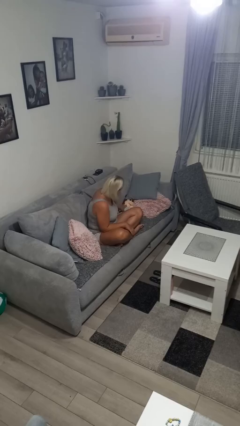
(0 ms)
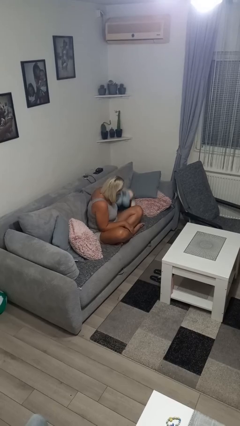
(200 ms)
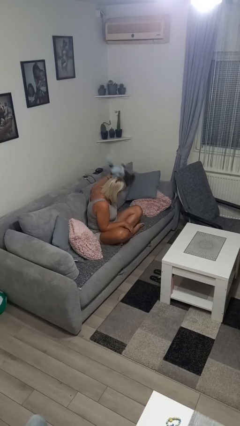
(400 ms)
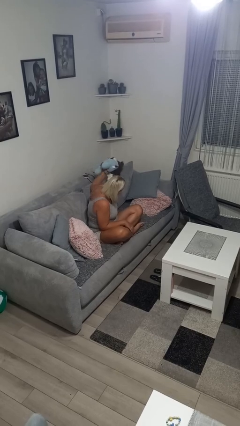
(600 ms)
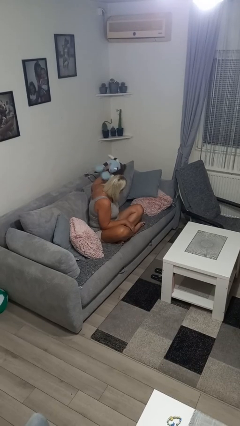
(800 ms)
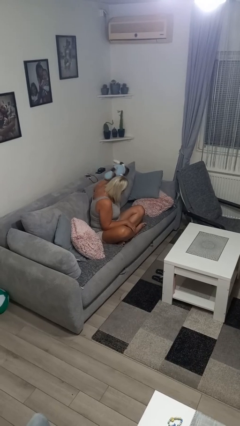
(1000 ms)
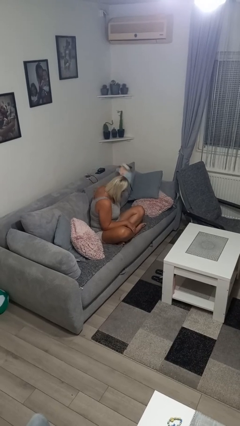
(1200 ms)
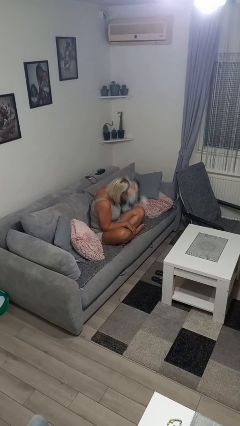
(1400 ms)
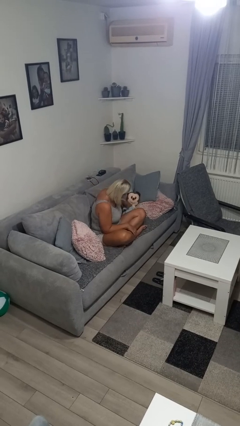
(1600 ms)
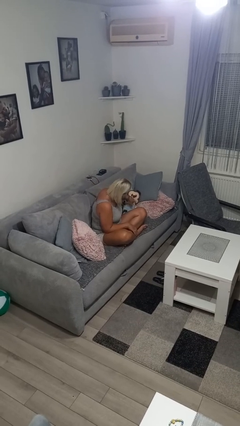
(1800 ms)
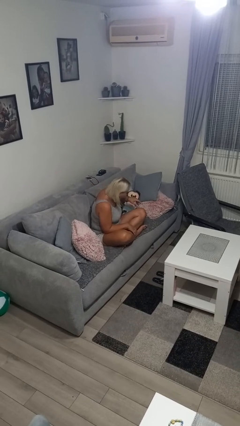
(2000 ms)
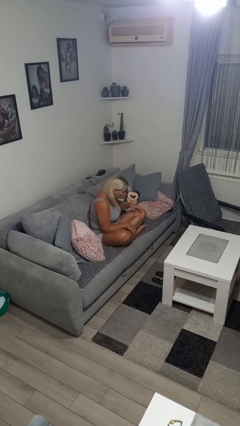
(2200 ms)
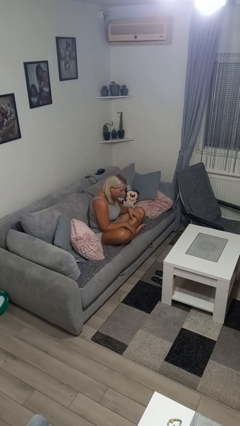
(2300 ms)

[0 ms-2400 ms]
person searches in couch

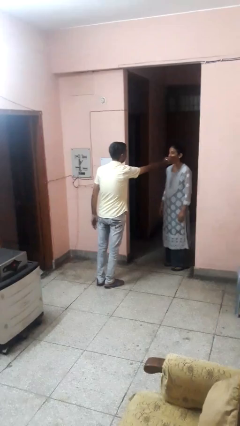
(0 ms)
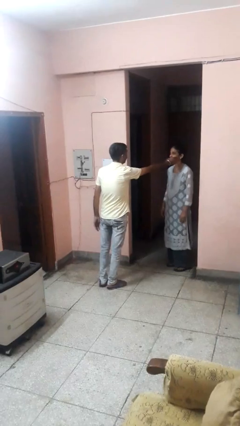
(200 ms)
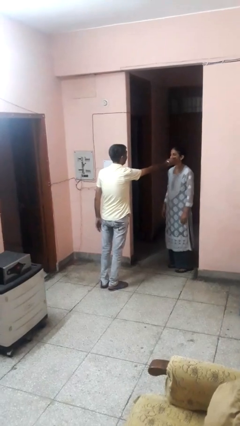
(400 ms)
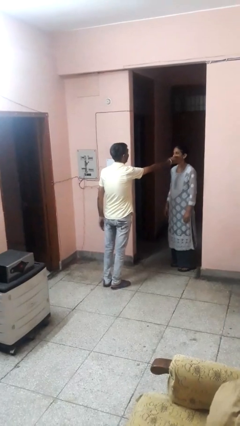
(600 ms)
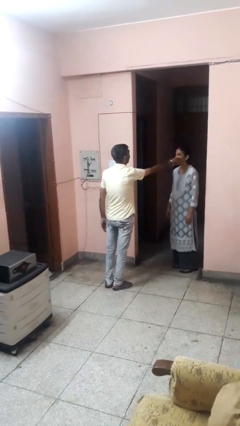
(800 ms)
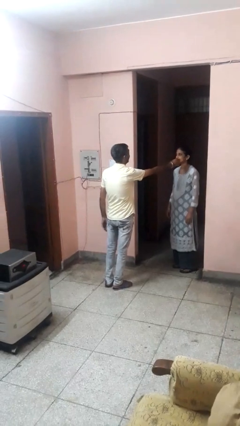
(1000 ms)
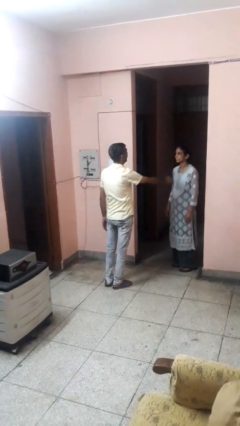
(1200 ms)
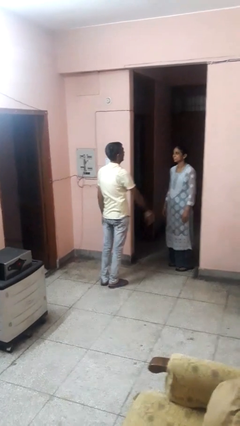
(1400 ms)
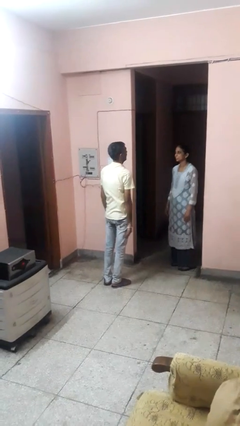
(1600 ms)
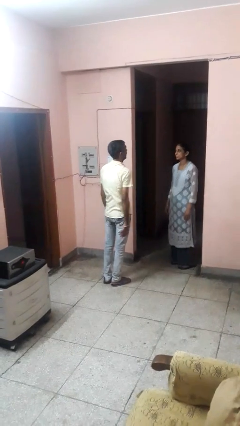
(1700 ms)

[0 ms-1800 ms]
person touches face of person

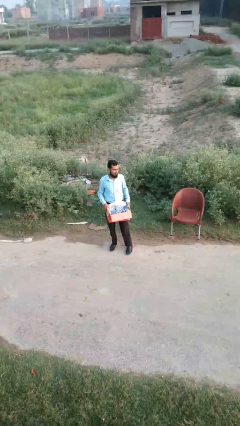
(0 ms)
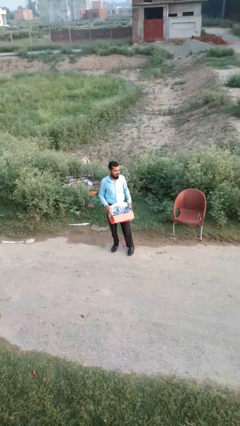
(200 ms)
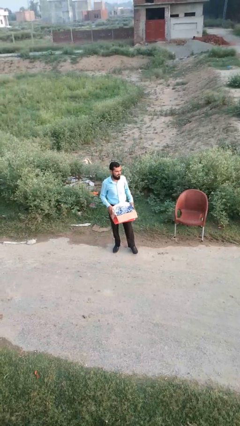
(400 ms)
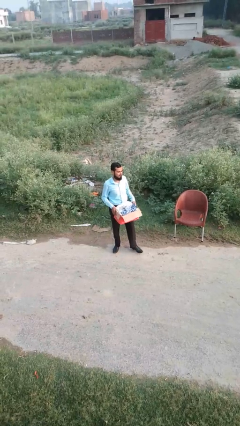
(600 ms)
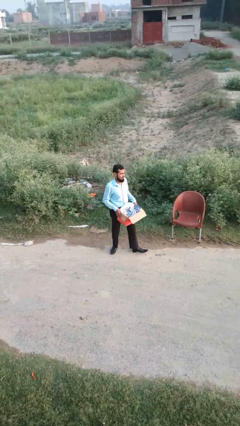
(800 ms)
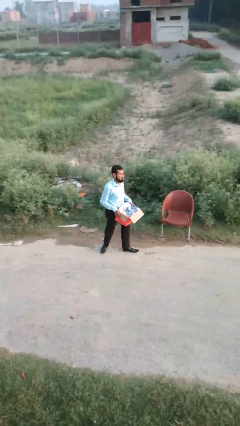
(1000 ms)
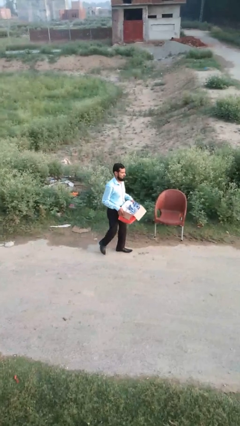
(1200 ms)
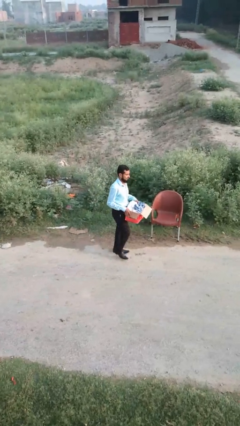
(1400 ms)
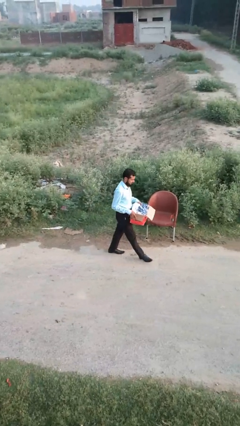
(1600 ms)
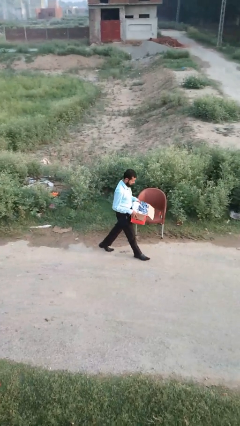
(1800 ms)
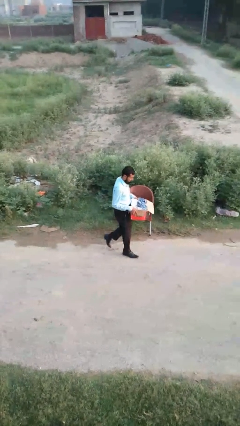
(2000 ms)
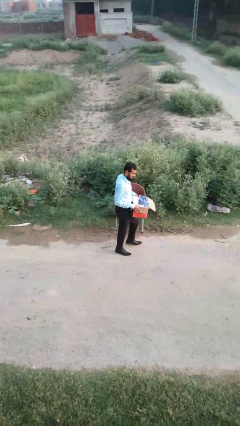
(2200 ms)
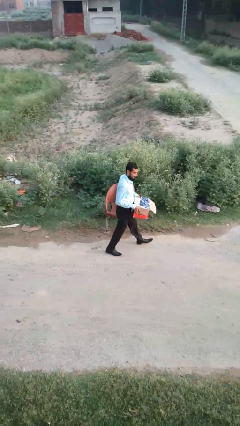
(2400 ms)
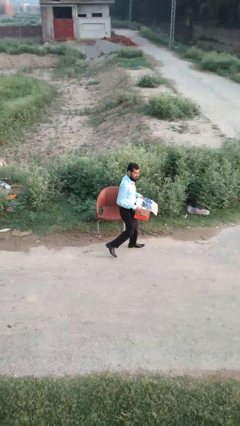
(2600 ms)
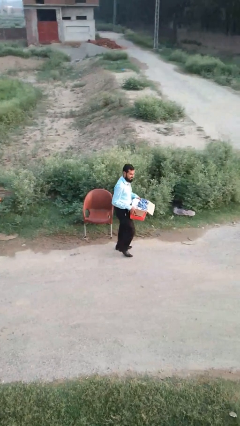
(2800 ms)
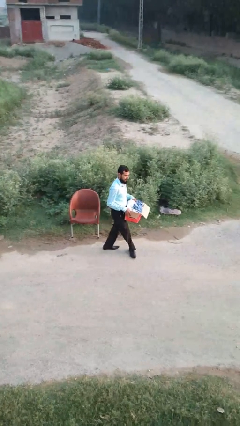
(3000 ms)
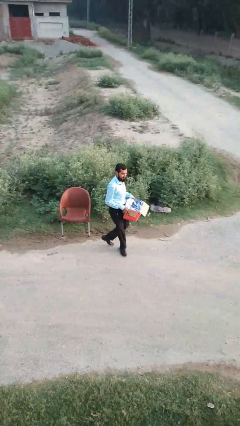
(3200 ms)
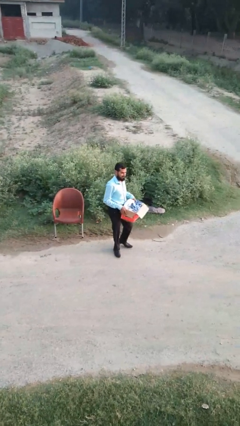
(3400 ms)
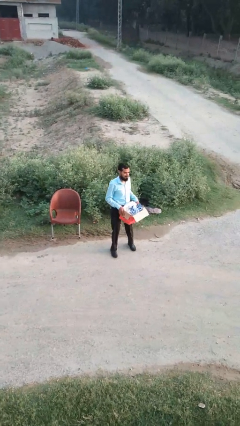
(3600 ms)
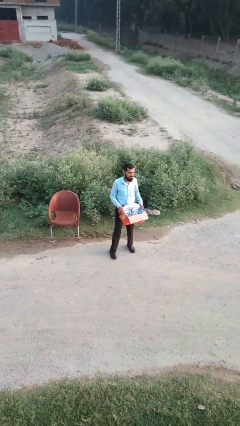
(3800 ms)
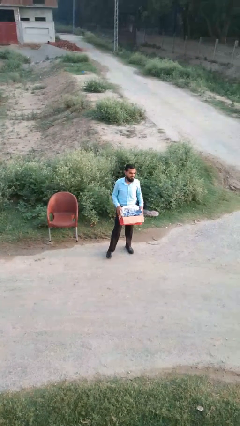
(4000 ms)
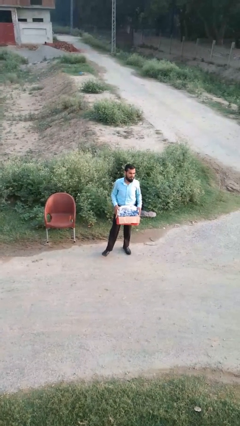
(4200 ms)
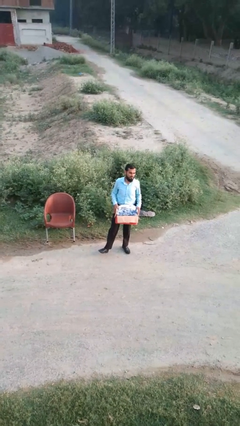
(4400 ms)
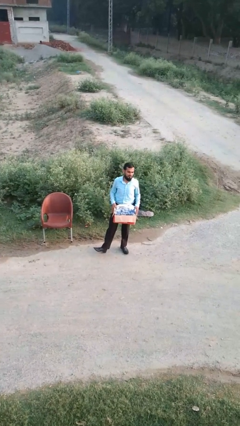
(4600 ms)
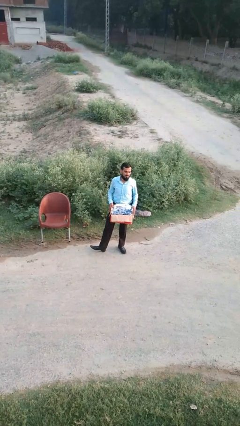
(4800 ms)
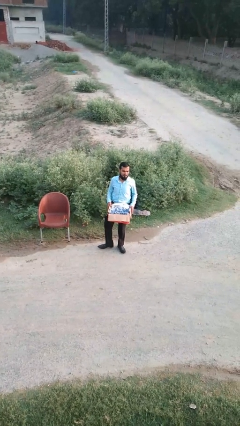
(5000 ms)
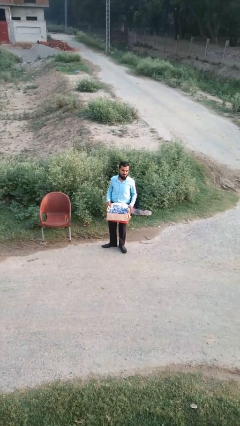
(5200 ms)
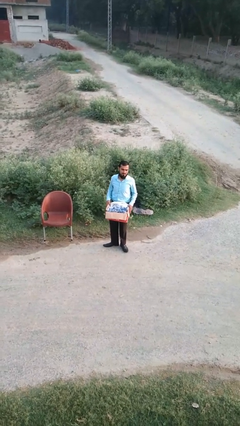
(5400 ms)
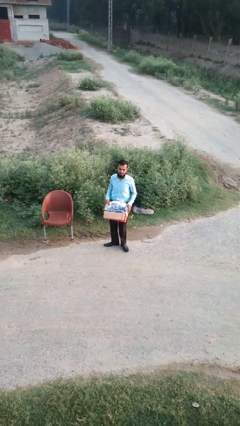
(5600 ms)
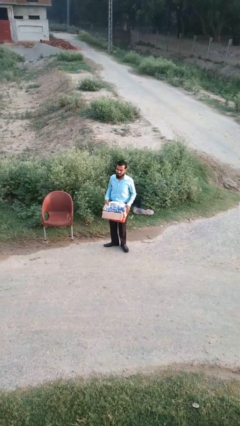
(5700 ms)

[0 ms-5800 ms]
person carries laundry basket

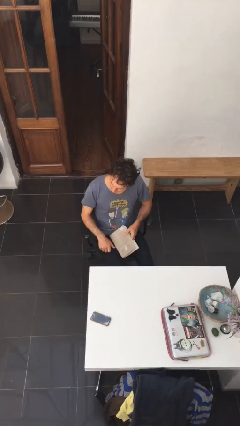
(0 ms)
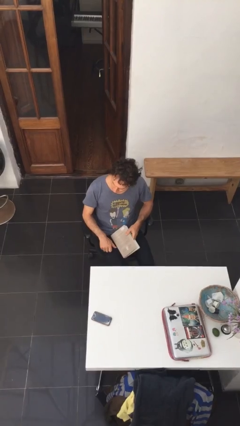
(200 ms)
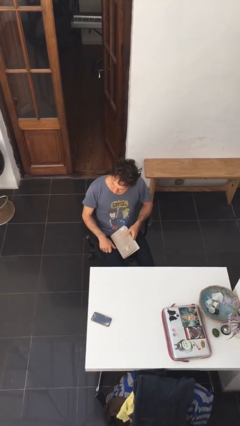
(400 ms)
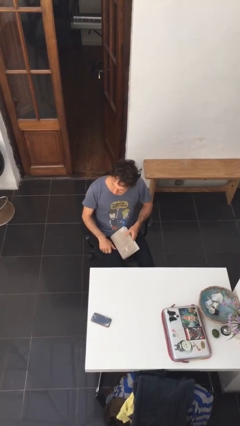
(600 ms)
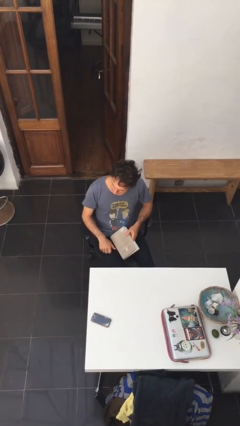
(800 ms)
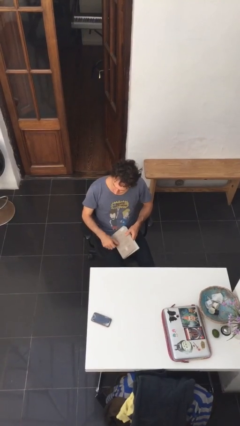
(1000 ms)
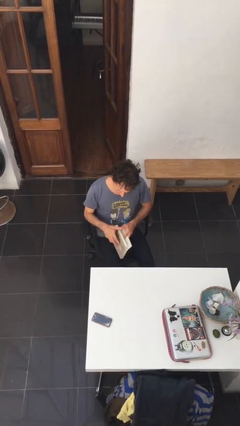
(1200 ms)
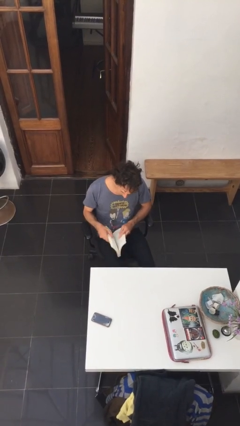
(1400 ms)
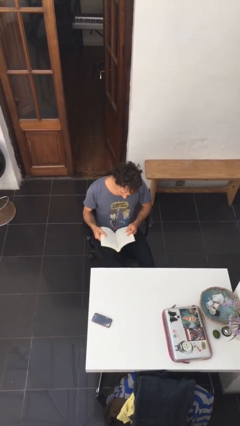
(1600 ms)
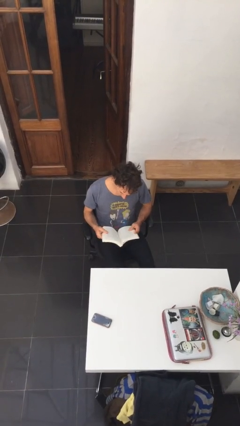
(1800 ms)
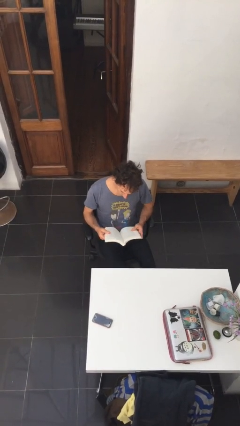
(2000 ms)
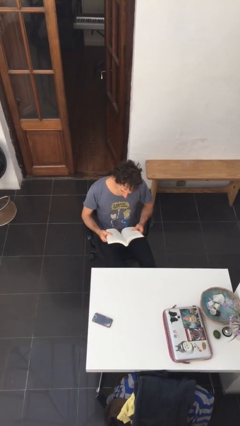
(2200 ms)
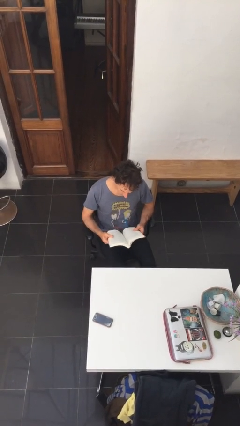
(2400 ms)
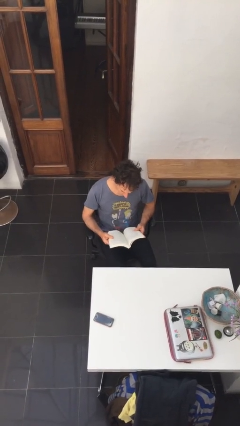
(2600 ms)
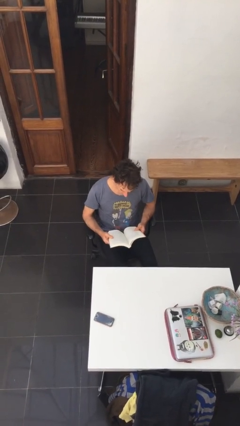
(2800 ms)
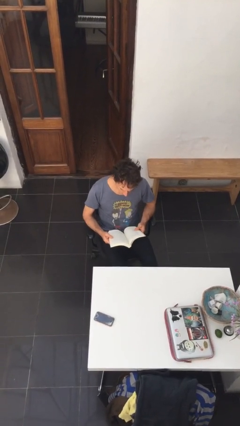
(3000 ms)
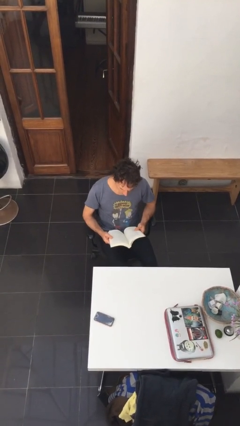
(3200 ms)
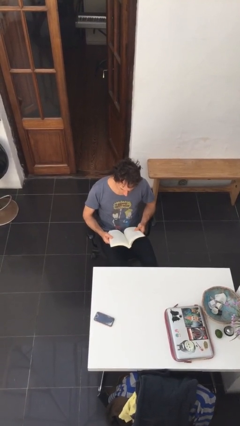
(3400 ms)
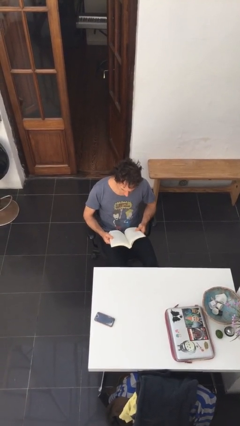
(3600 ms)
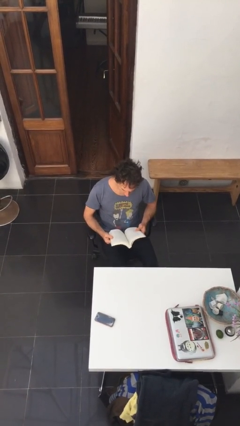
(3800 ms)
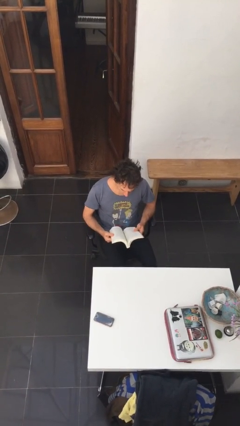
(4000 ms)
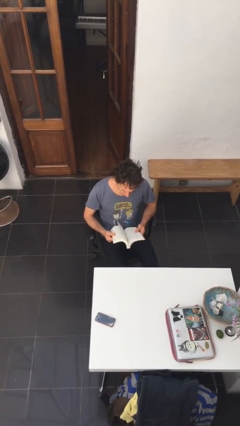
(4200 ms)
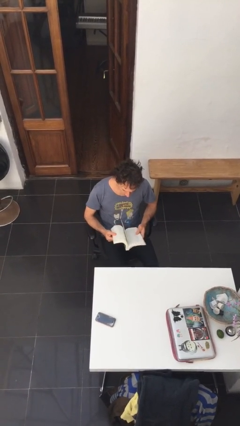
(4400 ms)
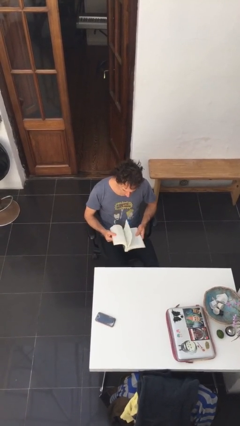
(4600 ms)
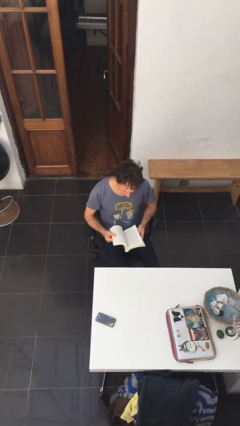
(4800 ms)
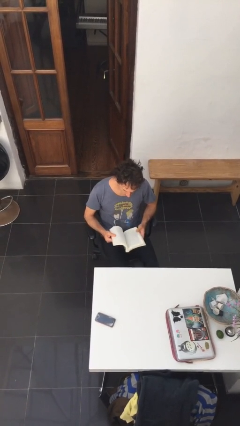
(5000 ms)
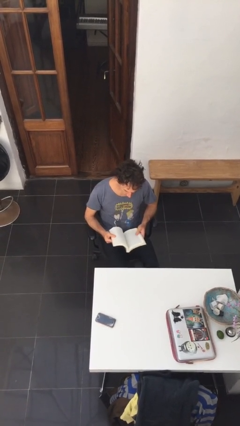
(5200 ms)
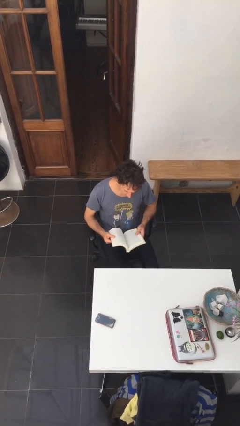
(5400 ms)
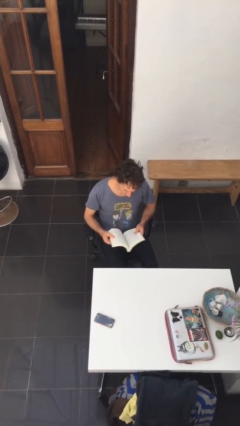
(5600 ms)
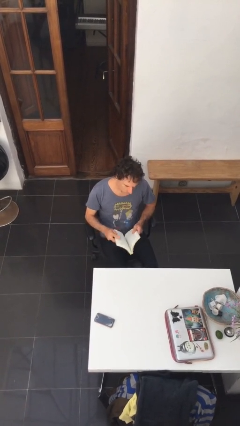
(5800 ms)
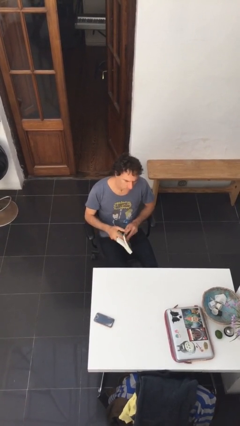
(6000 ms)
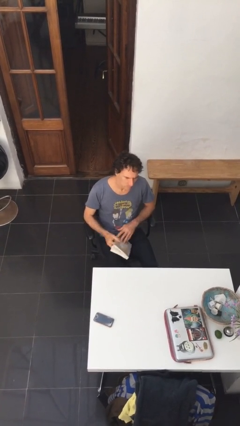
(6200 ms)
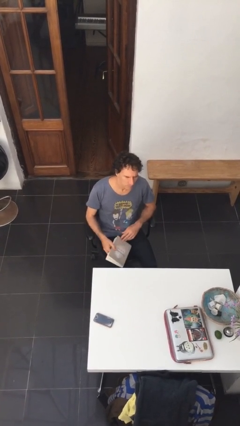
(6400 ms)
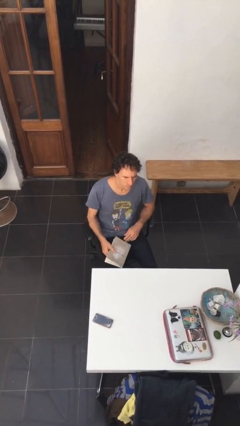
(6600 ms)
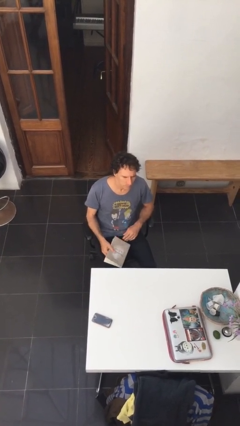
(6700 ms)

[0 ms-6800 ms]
person reads document

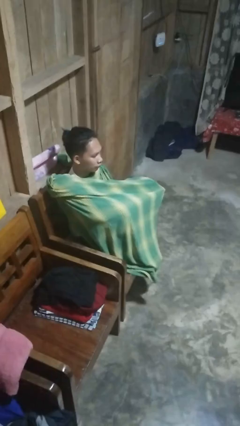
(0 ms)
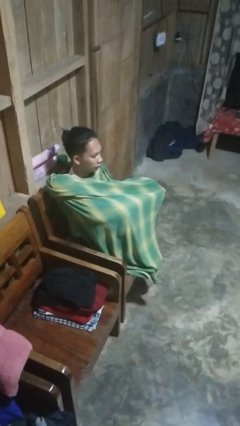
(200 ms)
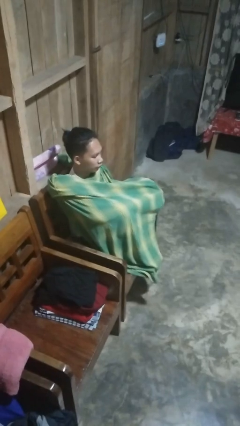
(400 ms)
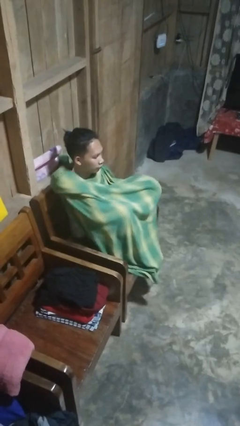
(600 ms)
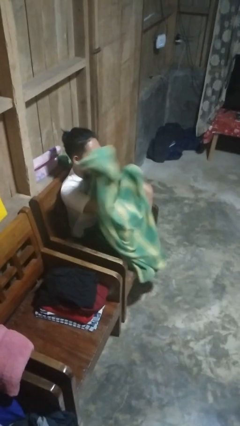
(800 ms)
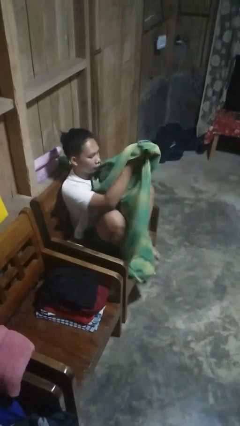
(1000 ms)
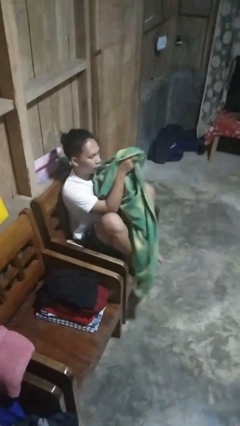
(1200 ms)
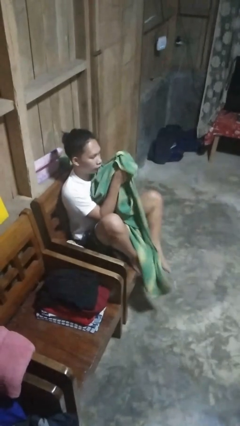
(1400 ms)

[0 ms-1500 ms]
person uncovers with blanket
